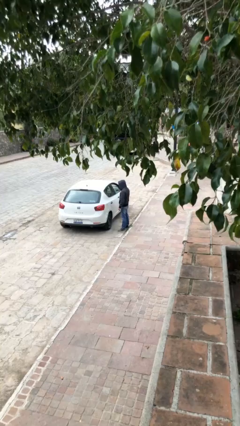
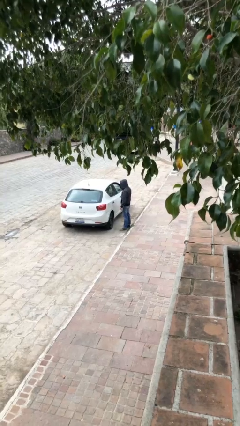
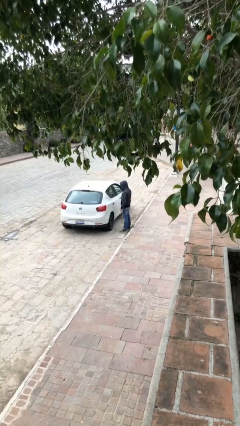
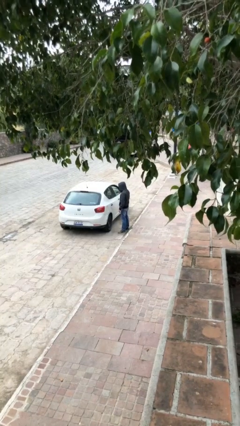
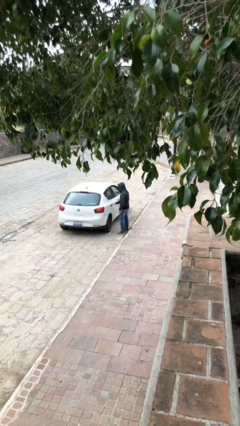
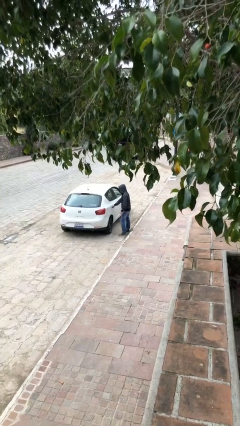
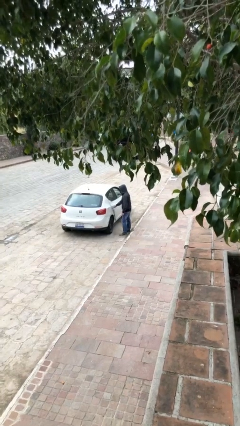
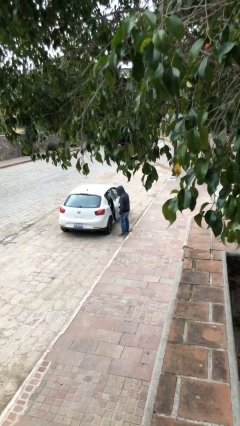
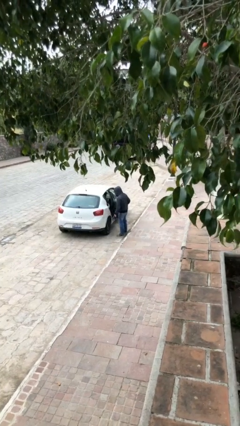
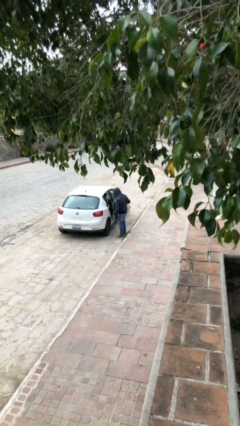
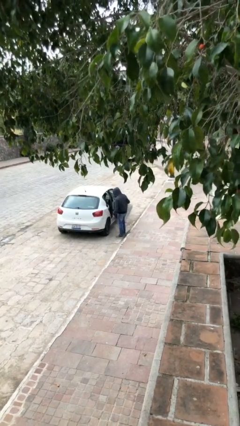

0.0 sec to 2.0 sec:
person opens car door

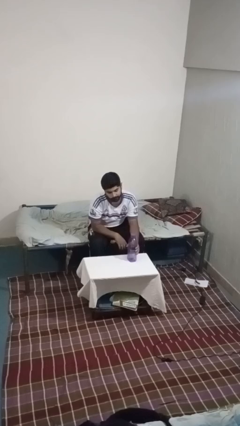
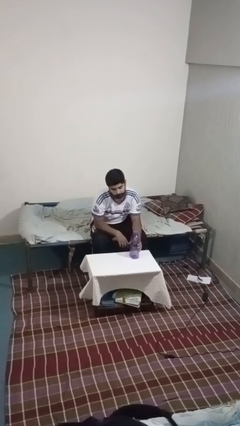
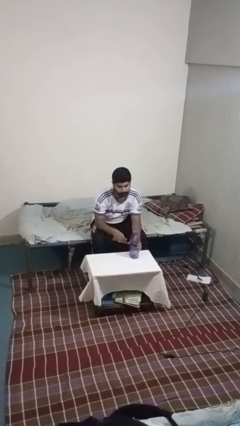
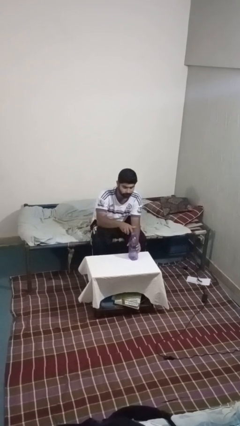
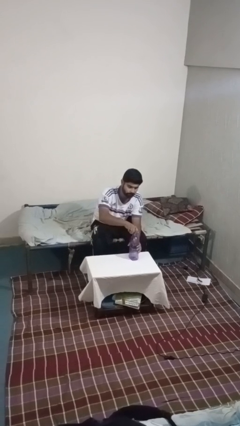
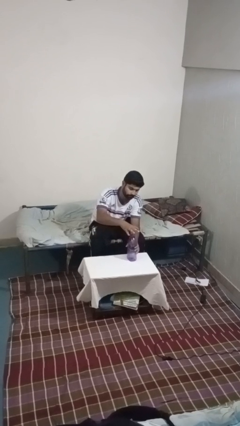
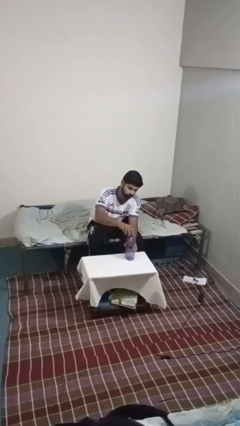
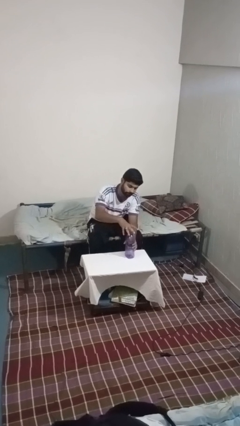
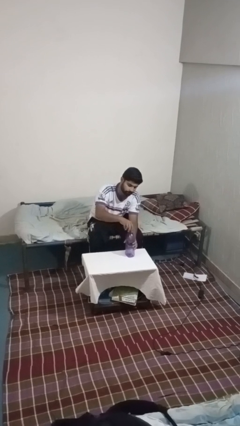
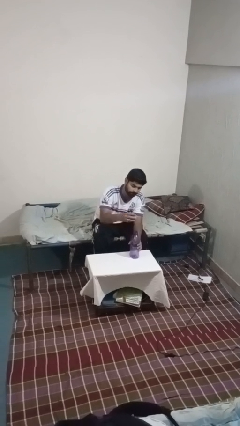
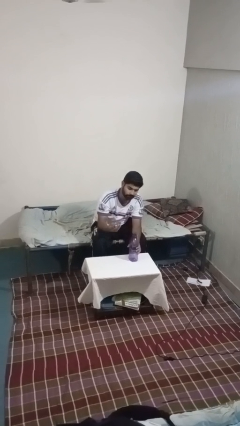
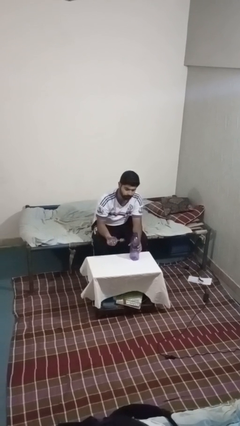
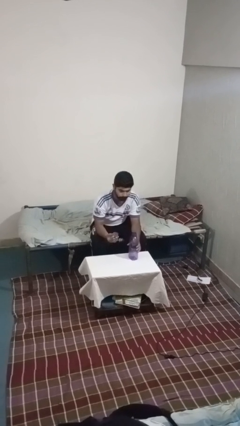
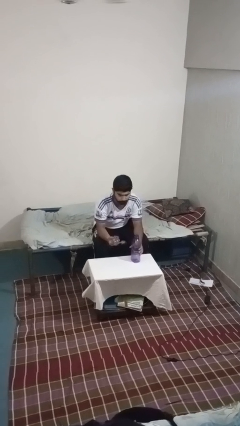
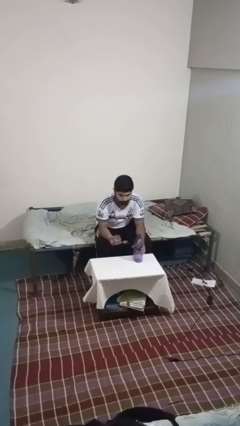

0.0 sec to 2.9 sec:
person unscrews lid from bottle

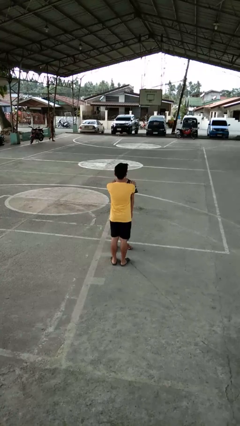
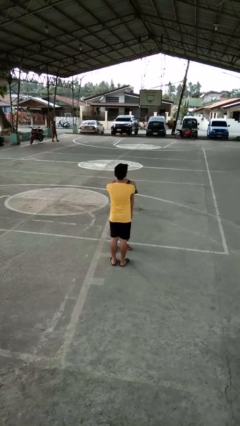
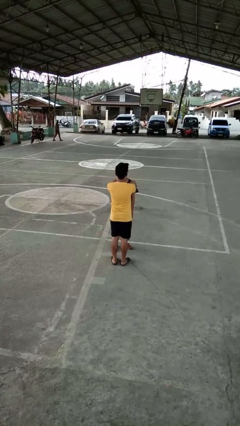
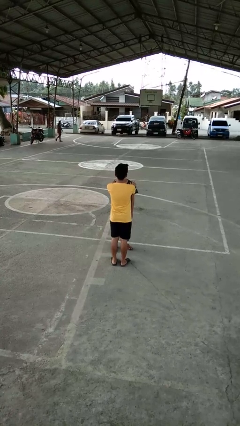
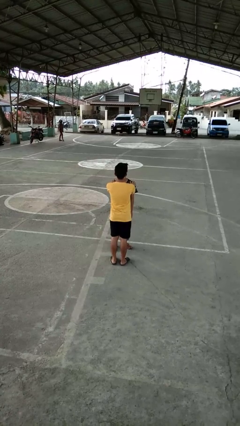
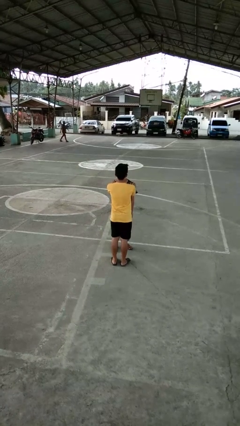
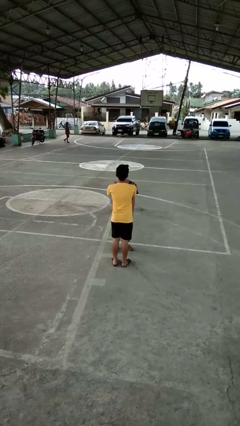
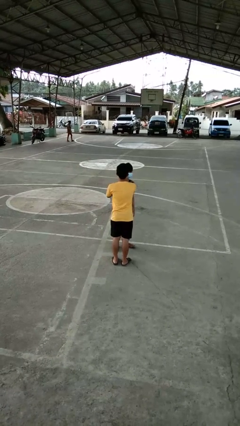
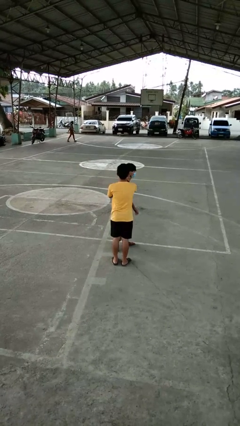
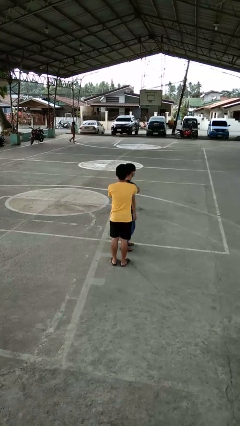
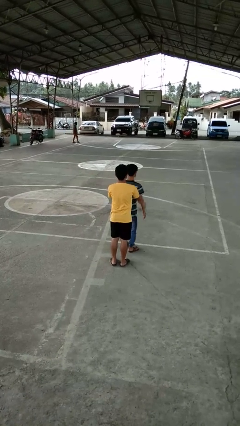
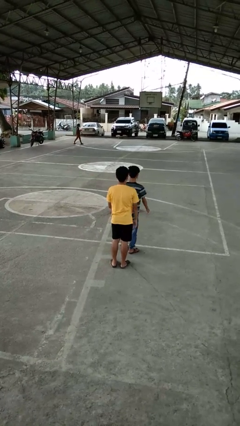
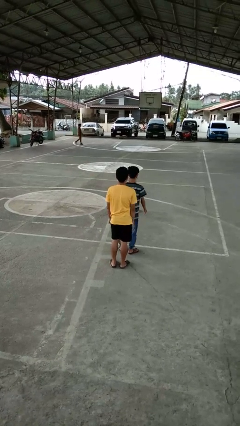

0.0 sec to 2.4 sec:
person grabs person by shoulder

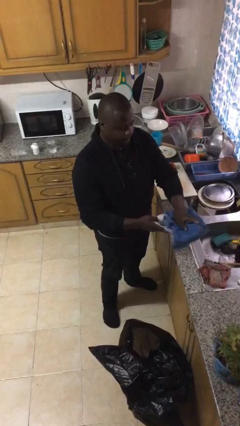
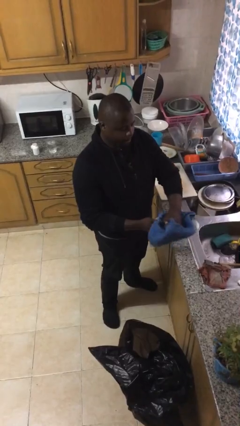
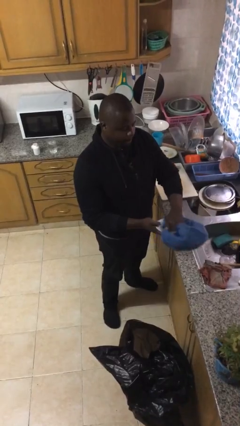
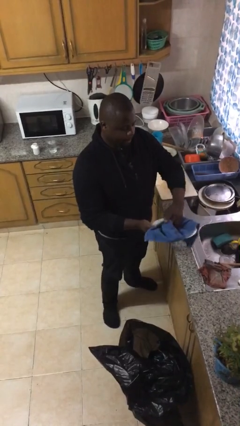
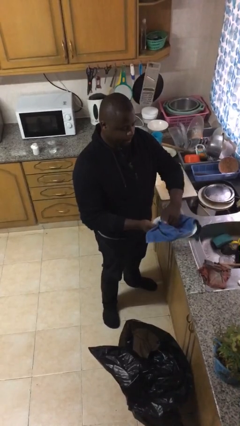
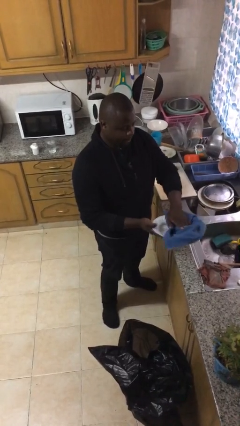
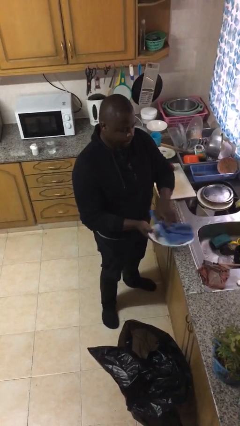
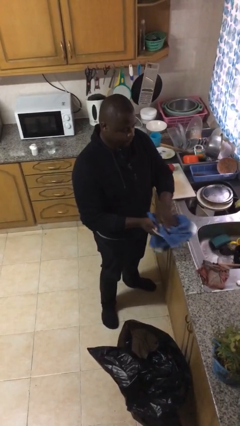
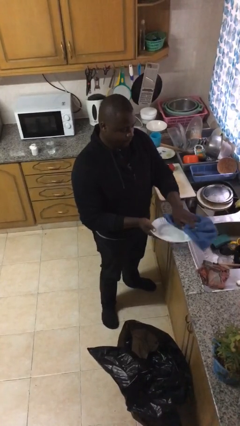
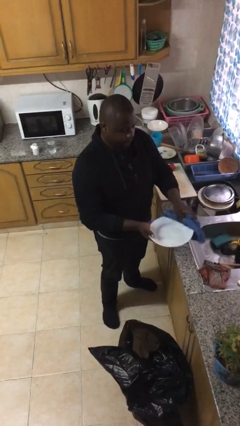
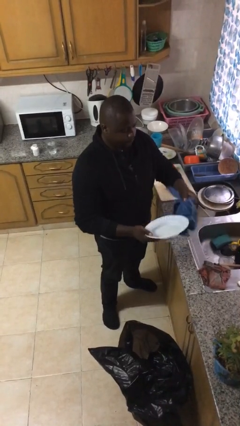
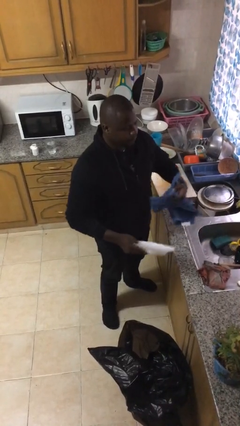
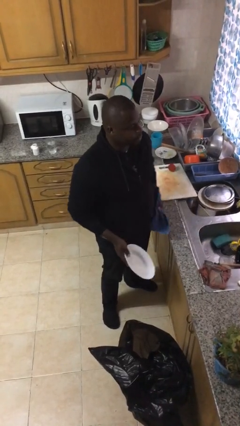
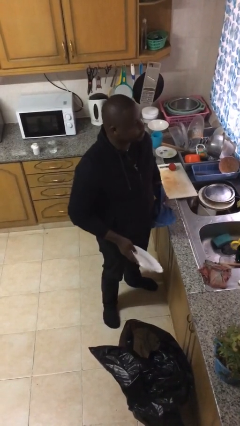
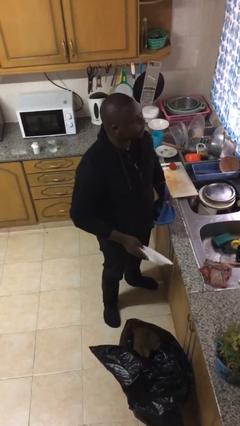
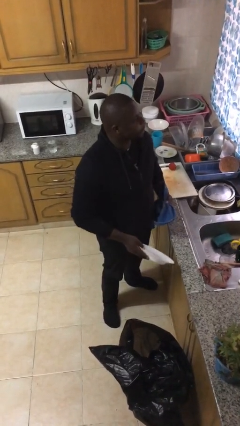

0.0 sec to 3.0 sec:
person dries dish

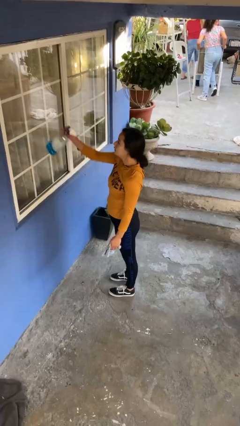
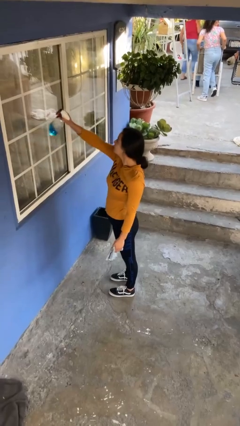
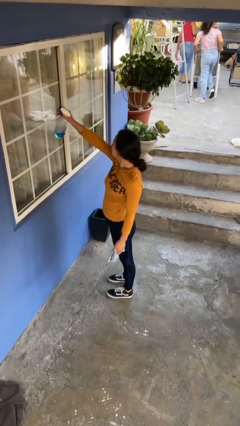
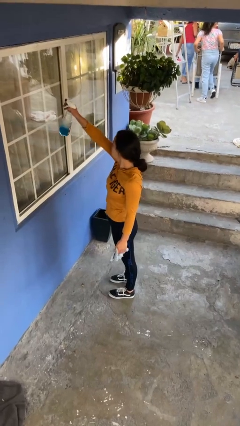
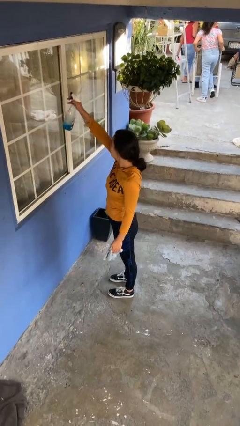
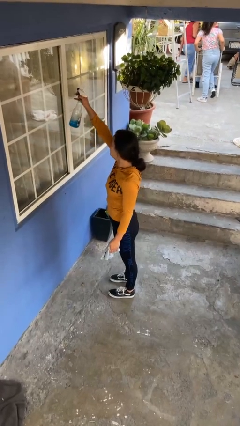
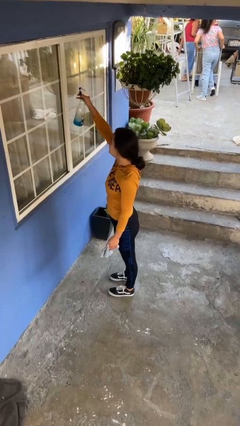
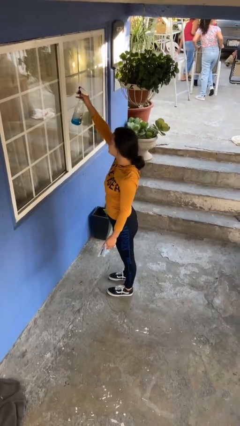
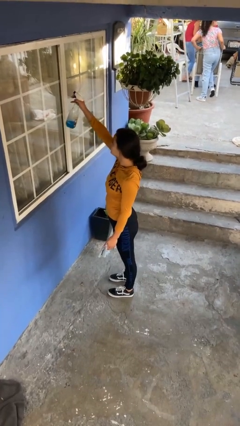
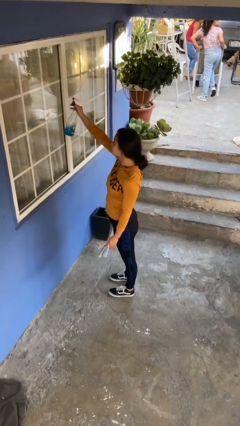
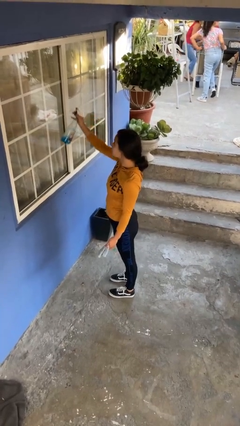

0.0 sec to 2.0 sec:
person sprays from bottle

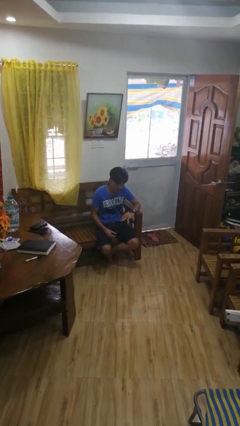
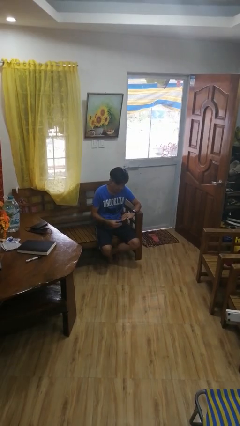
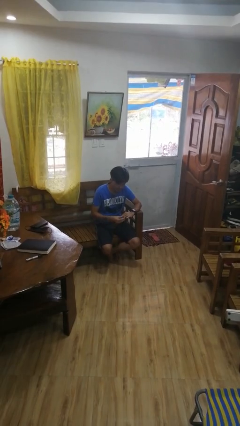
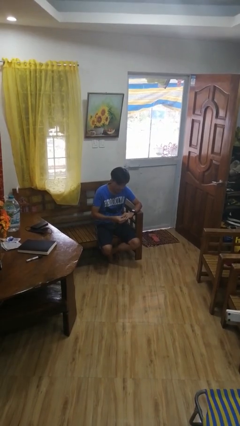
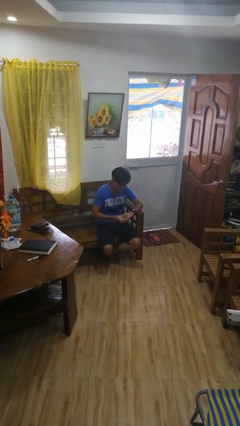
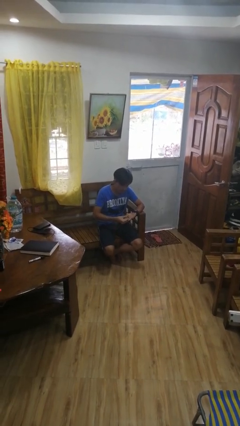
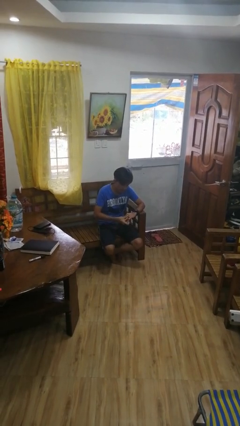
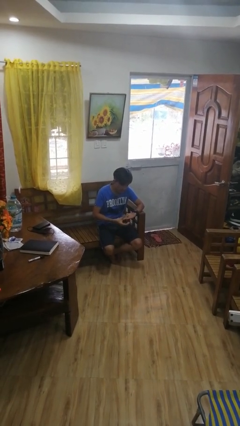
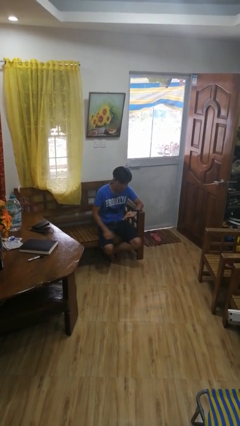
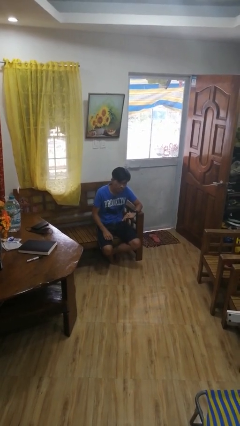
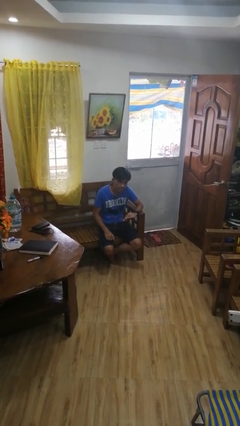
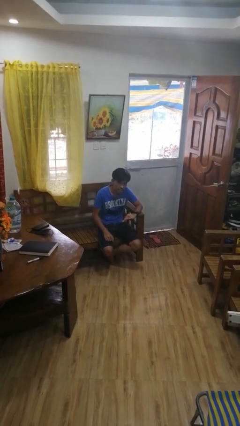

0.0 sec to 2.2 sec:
person puts on ring

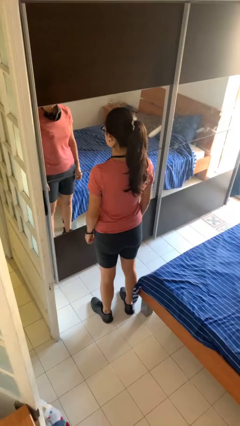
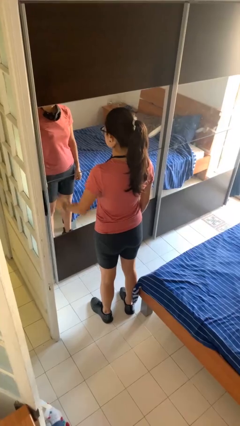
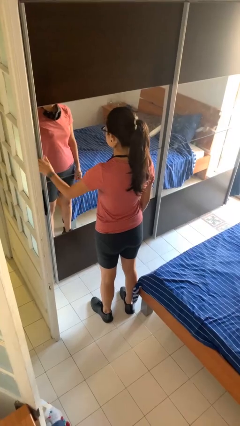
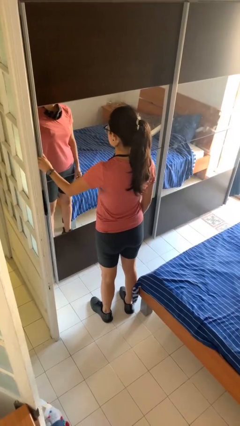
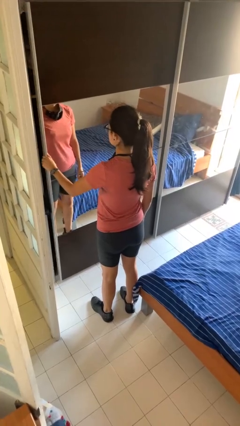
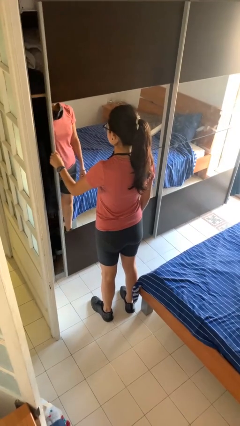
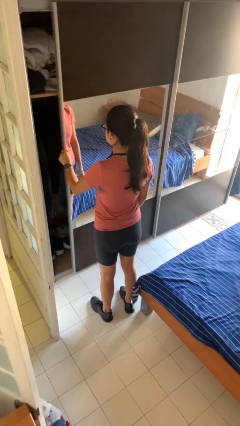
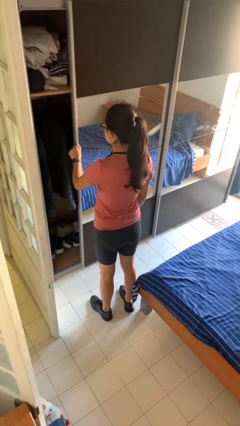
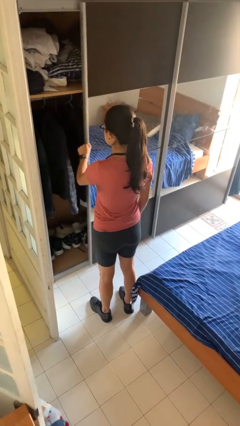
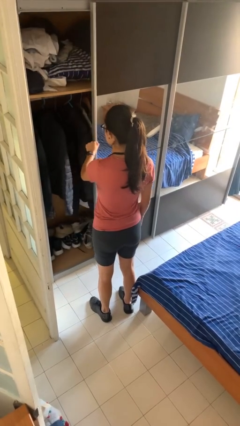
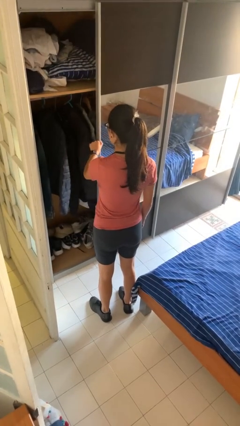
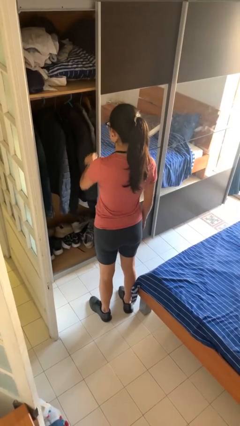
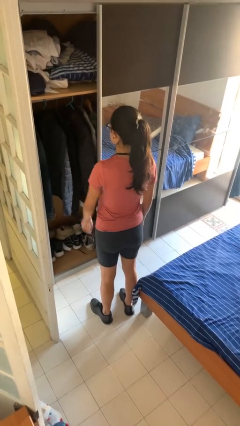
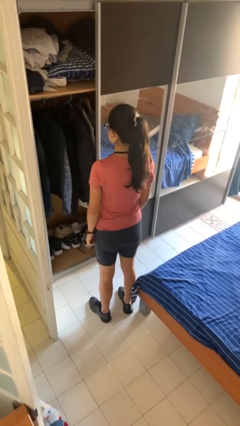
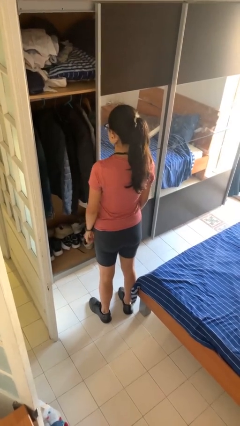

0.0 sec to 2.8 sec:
person opens dresser drawer
